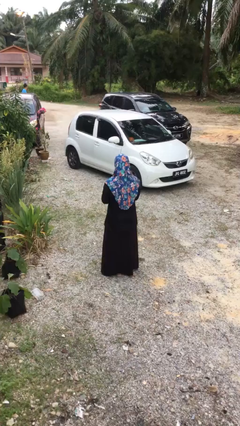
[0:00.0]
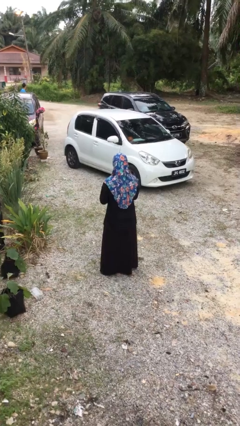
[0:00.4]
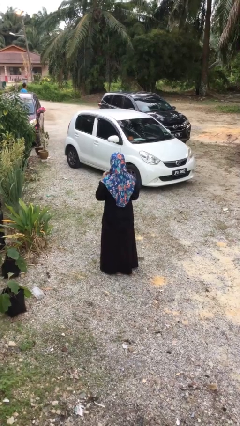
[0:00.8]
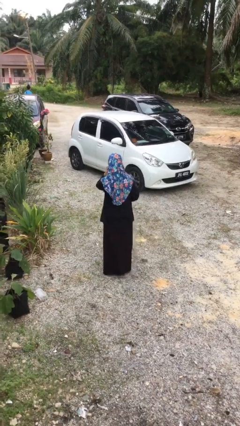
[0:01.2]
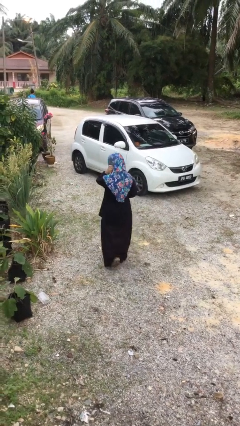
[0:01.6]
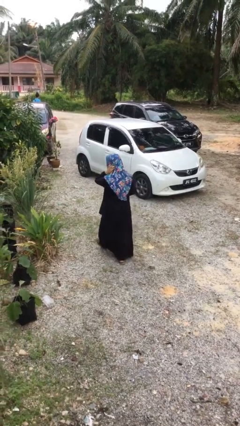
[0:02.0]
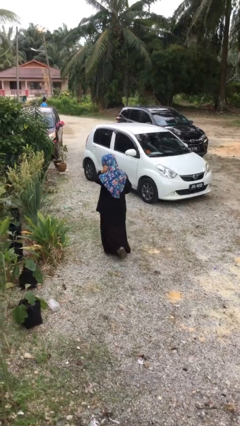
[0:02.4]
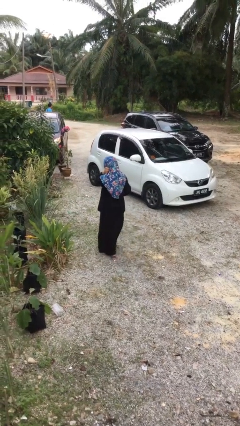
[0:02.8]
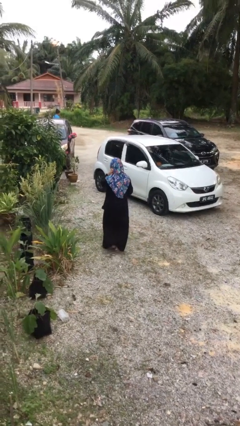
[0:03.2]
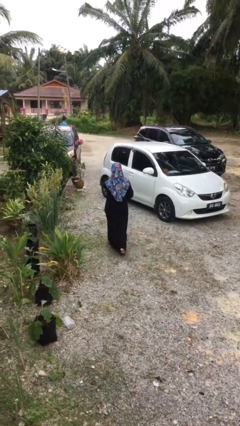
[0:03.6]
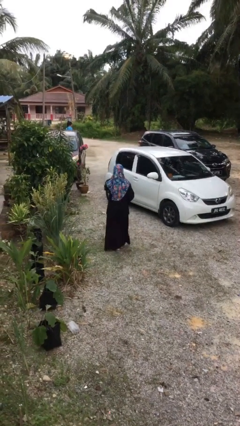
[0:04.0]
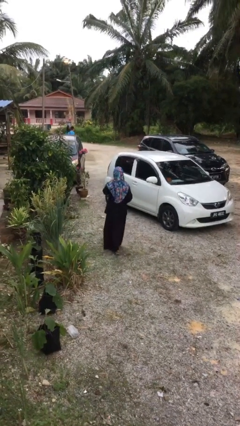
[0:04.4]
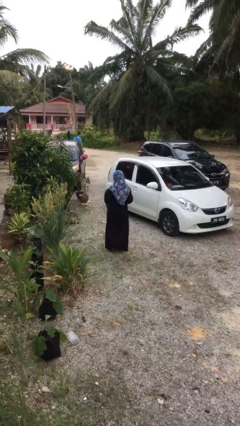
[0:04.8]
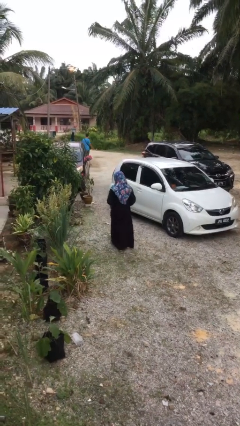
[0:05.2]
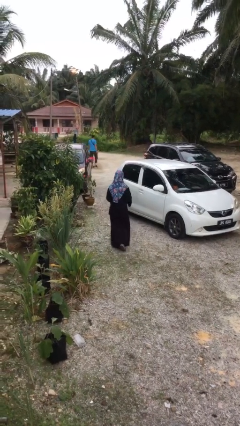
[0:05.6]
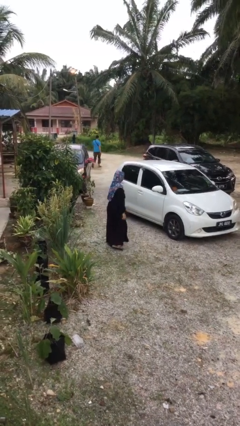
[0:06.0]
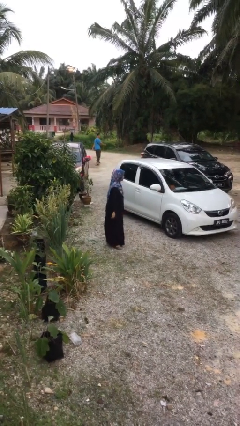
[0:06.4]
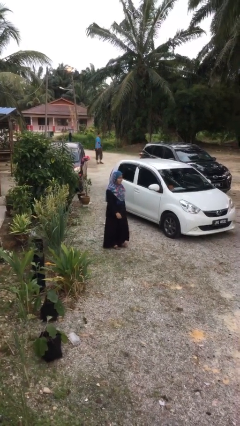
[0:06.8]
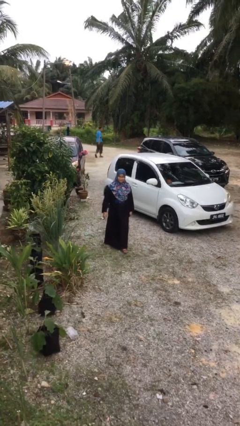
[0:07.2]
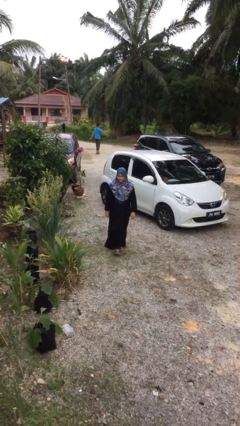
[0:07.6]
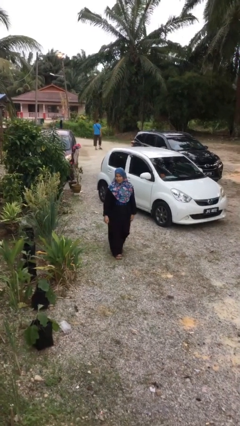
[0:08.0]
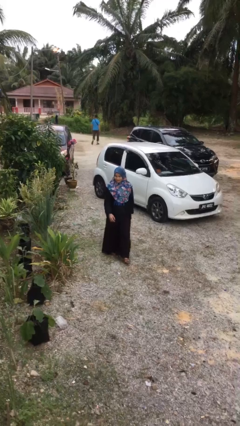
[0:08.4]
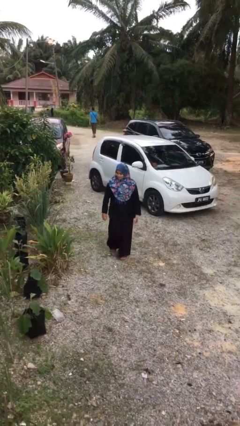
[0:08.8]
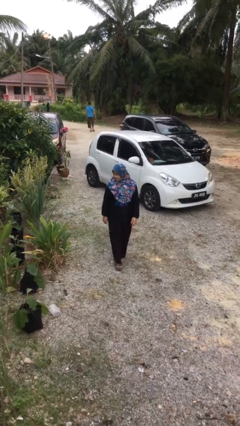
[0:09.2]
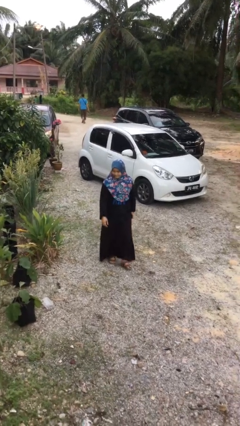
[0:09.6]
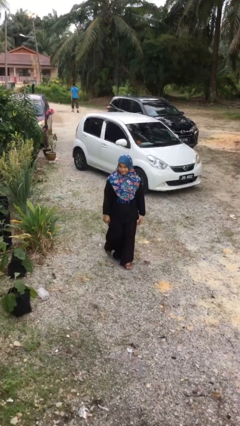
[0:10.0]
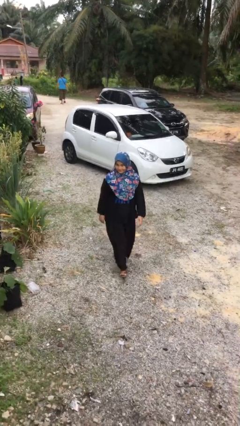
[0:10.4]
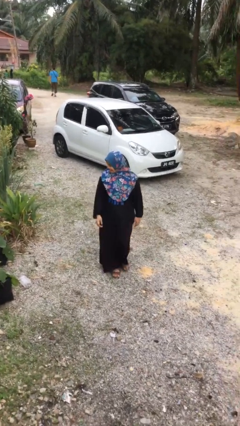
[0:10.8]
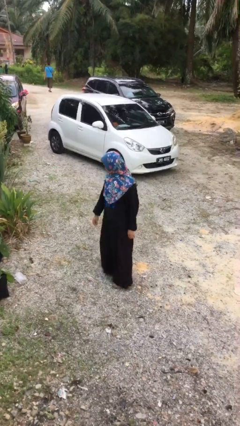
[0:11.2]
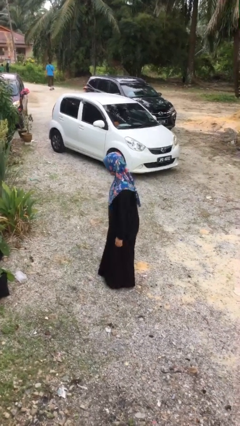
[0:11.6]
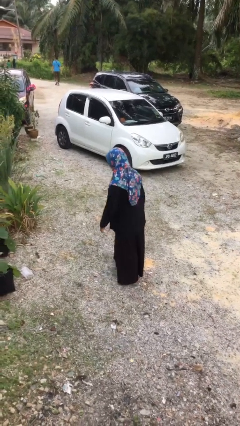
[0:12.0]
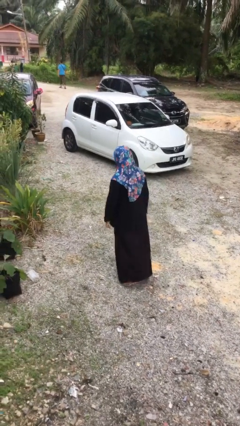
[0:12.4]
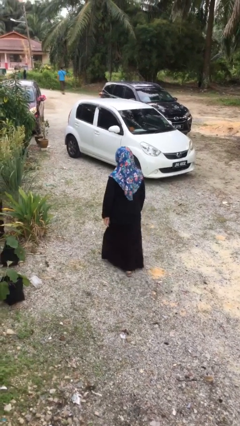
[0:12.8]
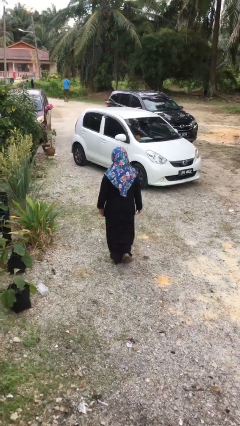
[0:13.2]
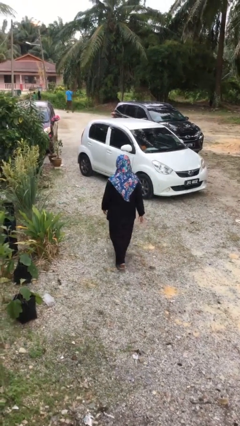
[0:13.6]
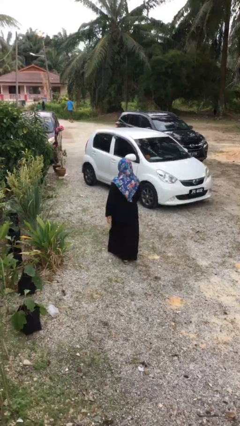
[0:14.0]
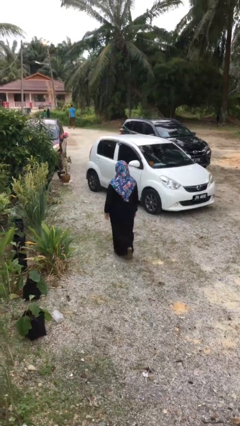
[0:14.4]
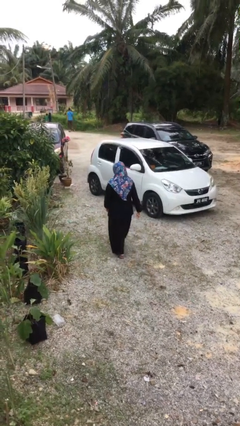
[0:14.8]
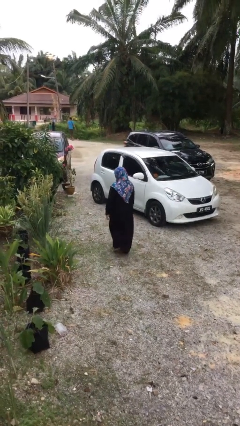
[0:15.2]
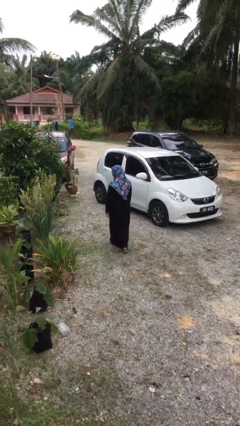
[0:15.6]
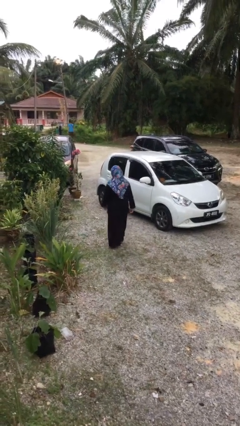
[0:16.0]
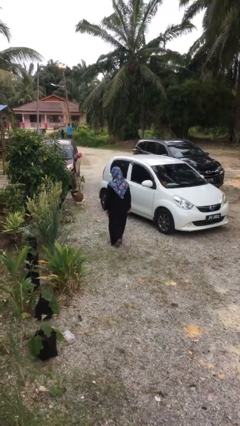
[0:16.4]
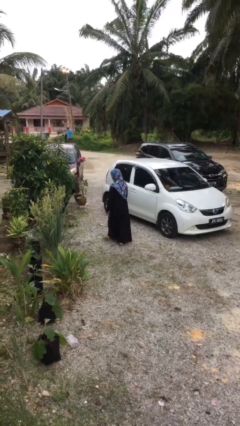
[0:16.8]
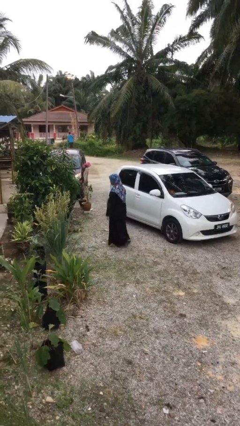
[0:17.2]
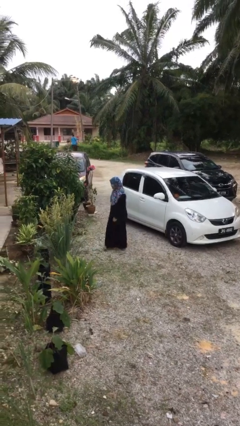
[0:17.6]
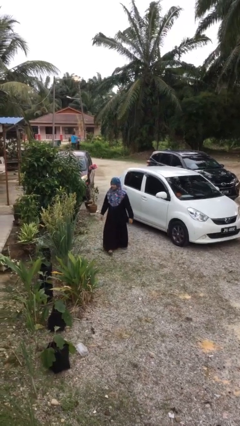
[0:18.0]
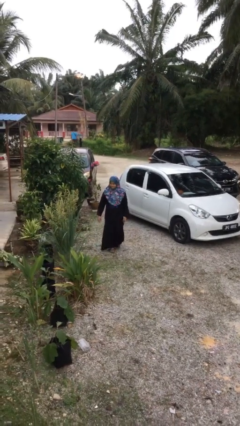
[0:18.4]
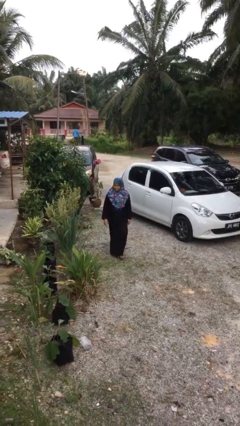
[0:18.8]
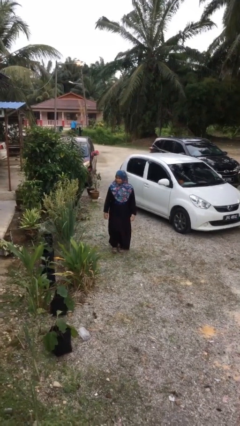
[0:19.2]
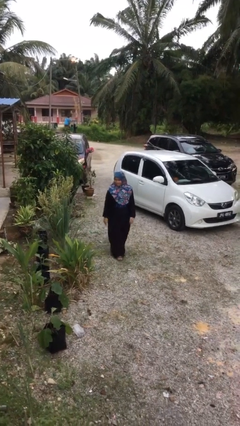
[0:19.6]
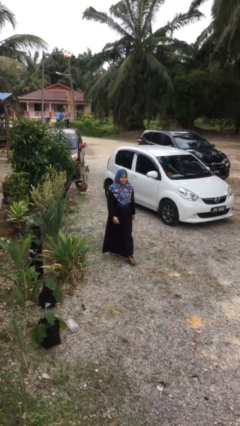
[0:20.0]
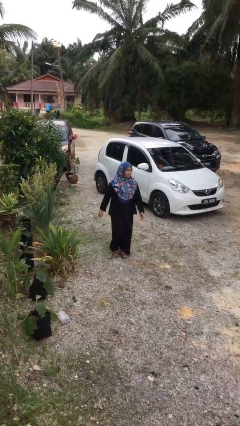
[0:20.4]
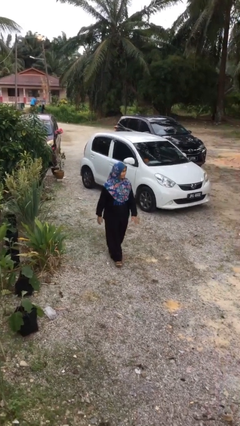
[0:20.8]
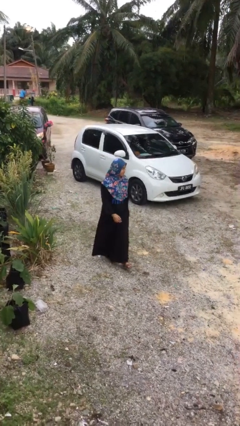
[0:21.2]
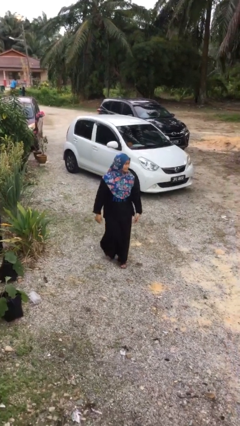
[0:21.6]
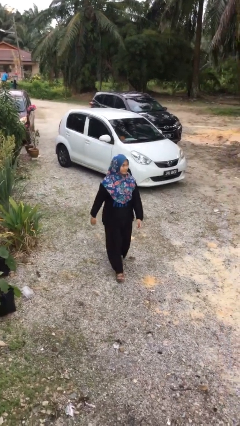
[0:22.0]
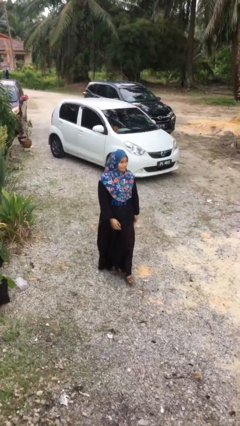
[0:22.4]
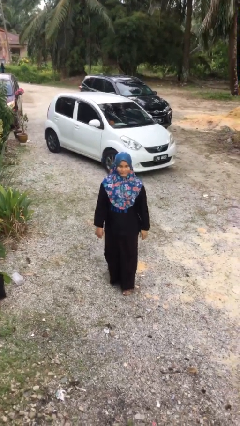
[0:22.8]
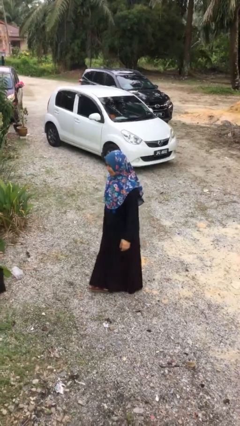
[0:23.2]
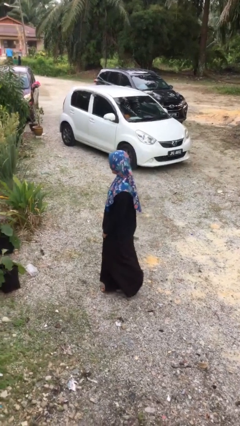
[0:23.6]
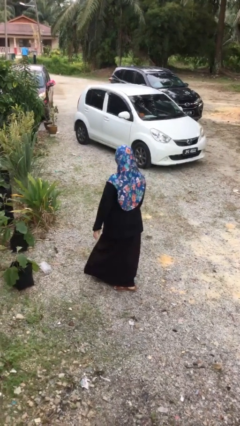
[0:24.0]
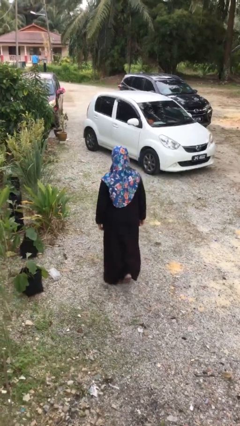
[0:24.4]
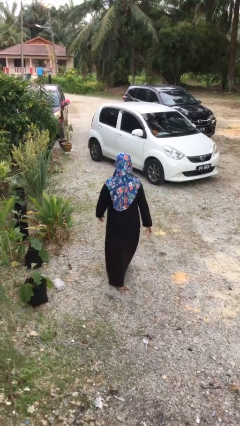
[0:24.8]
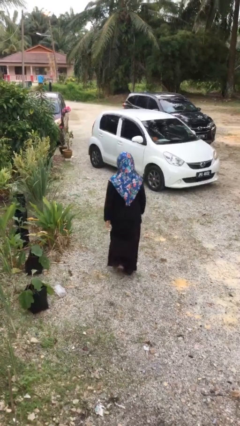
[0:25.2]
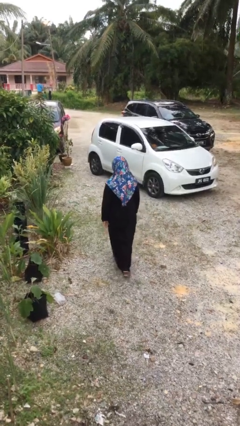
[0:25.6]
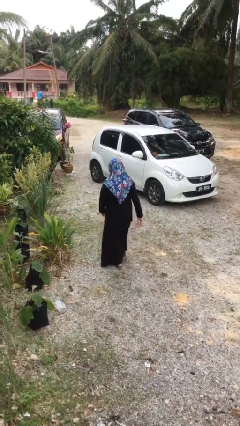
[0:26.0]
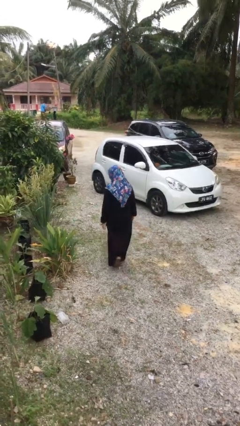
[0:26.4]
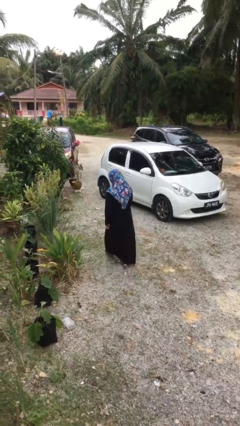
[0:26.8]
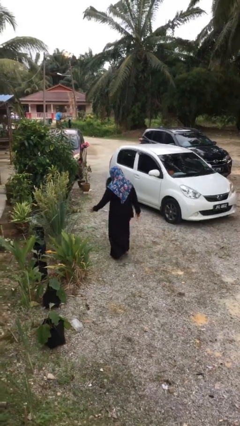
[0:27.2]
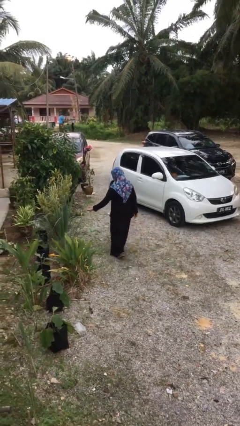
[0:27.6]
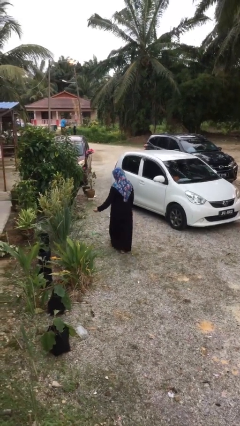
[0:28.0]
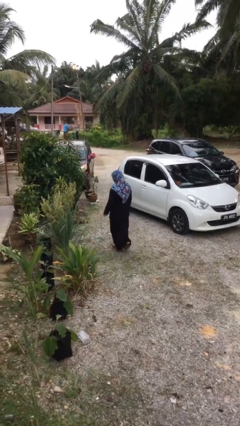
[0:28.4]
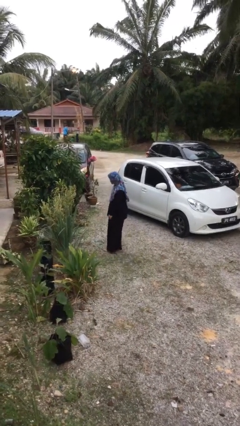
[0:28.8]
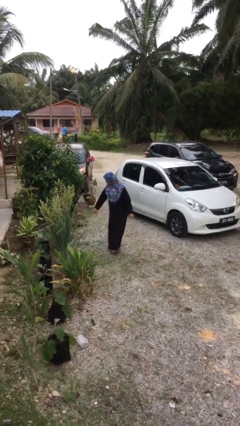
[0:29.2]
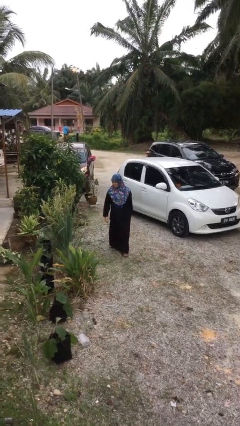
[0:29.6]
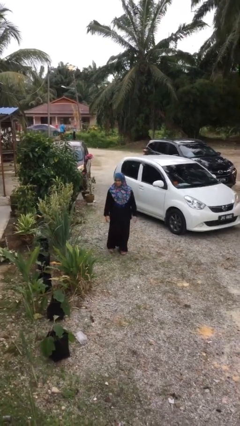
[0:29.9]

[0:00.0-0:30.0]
person walks

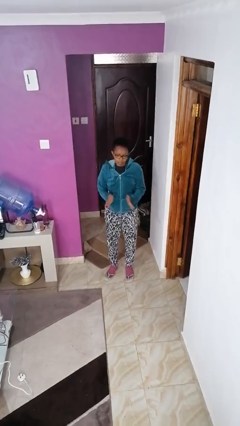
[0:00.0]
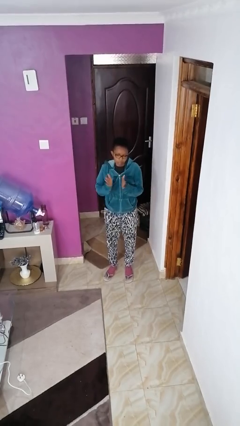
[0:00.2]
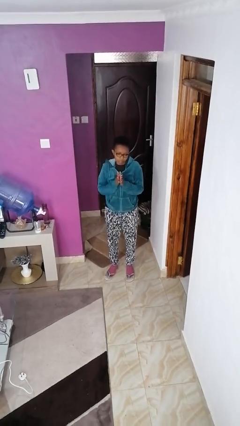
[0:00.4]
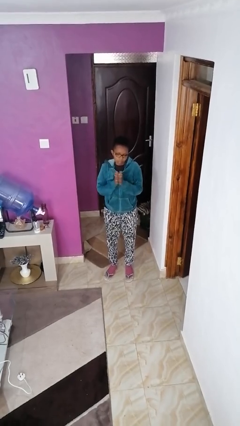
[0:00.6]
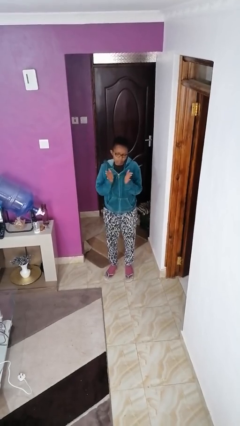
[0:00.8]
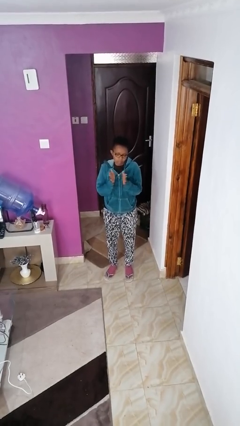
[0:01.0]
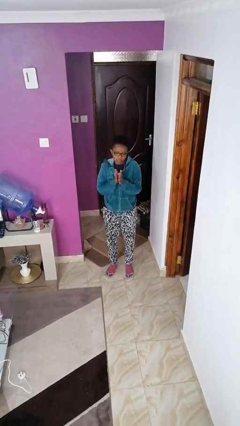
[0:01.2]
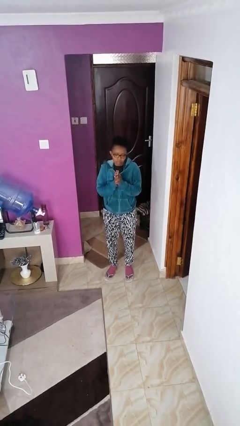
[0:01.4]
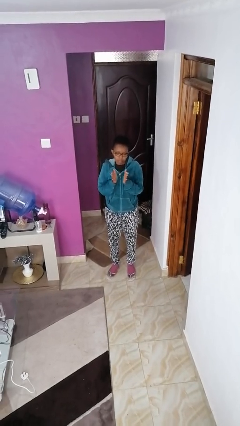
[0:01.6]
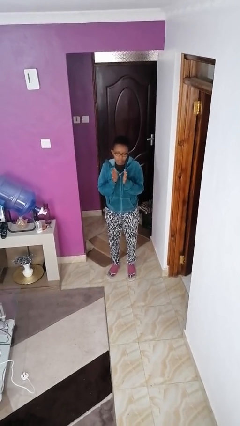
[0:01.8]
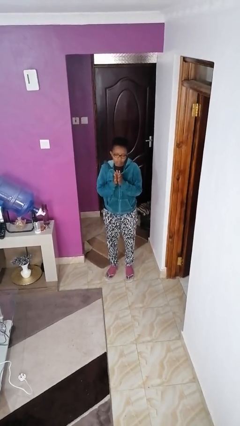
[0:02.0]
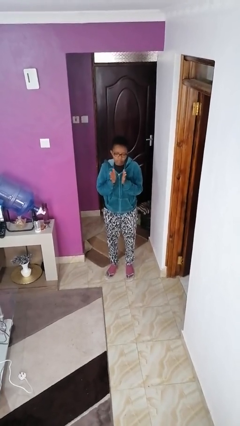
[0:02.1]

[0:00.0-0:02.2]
person claps hands

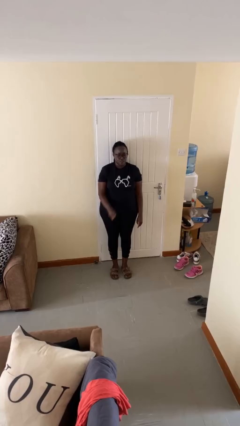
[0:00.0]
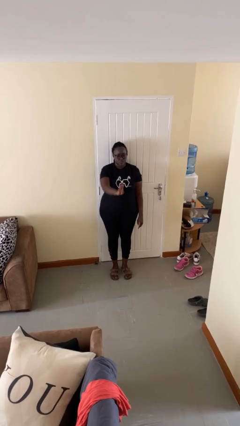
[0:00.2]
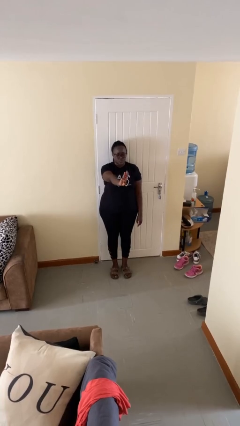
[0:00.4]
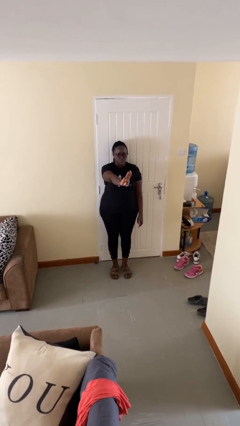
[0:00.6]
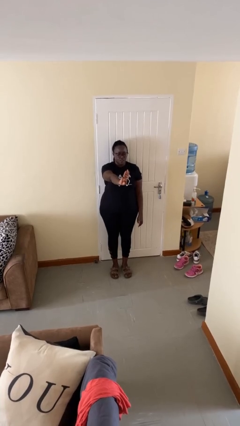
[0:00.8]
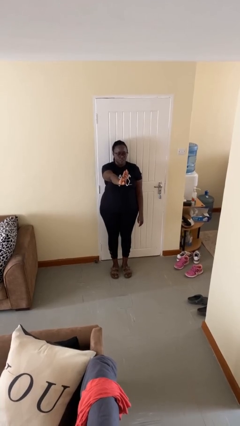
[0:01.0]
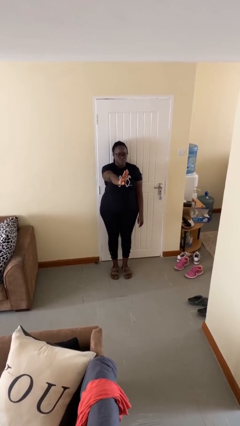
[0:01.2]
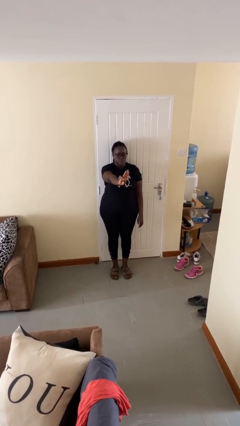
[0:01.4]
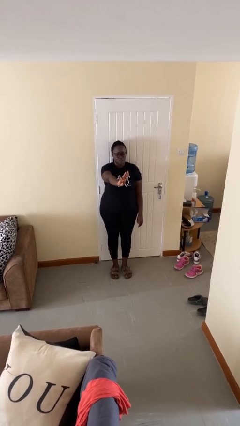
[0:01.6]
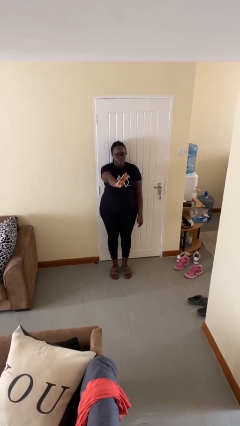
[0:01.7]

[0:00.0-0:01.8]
person gestures number three
